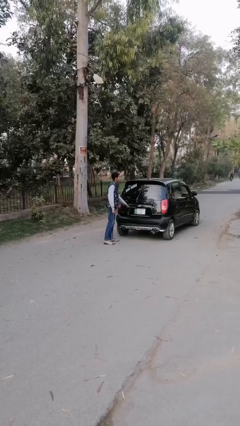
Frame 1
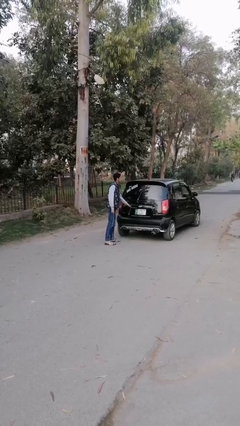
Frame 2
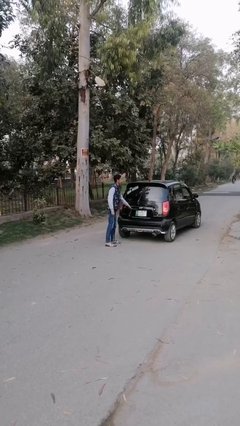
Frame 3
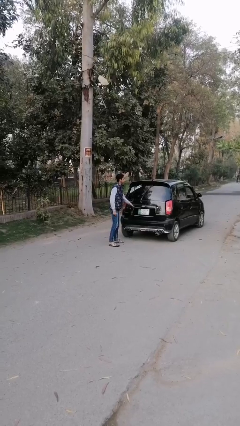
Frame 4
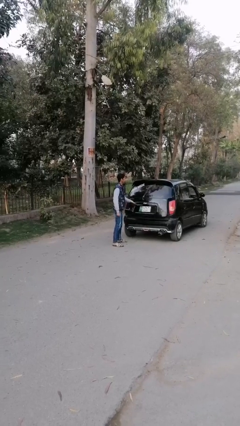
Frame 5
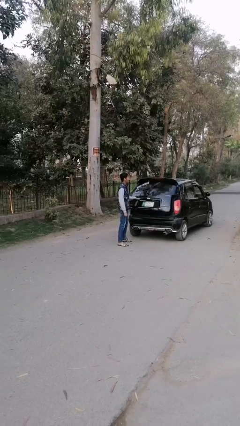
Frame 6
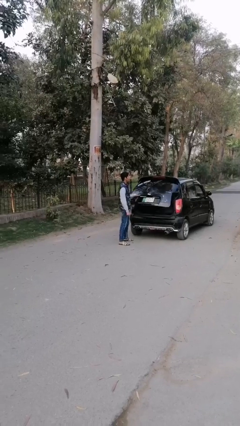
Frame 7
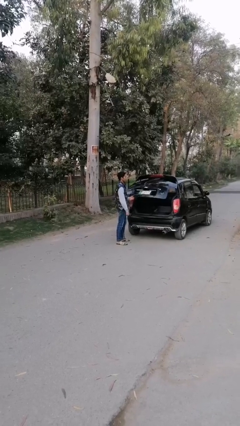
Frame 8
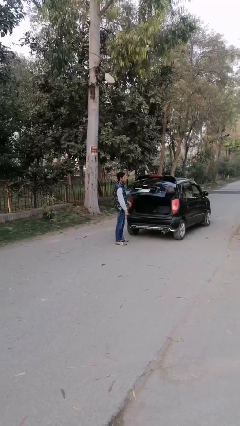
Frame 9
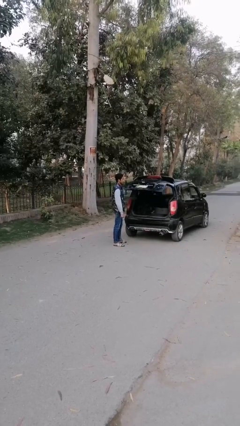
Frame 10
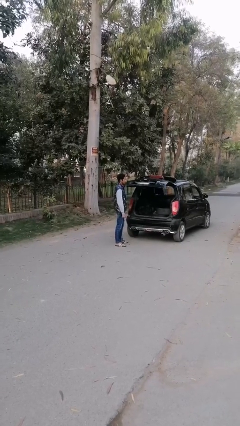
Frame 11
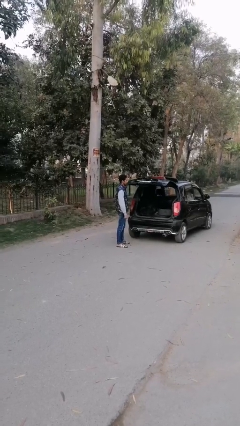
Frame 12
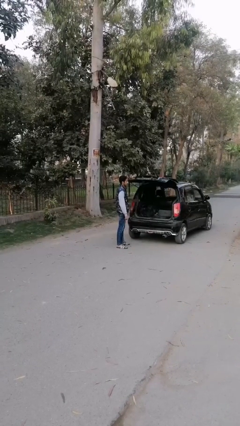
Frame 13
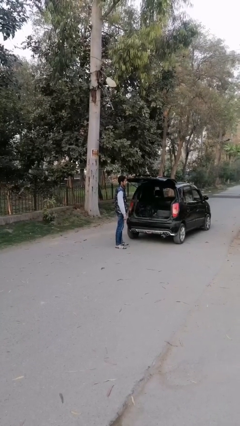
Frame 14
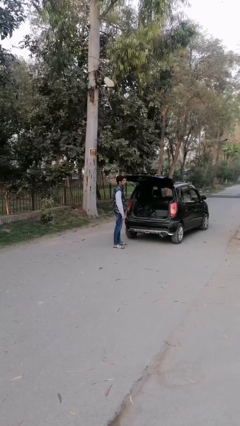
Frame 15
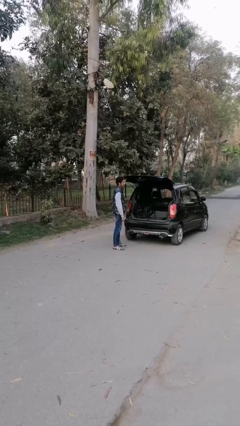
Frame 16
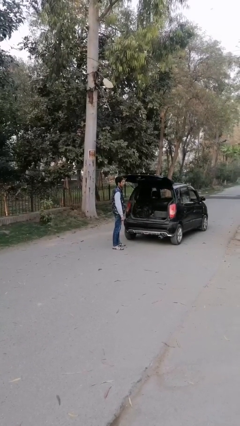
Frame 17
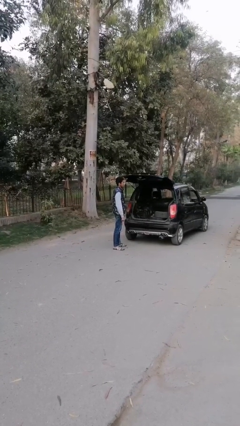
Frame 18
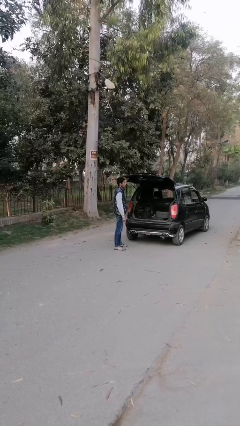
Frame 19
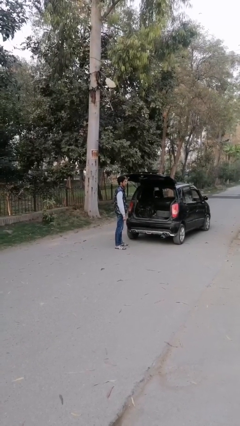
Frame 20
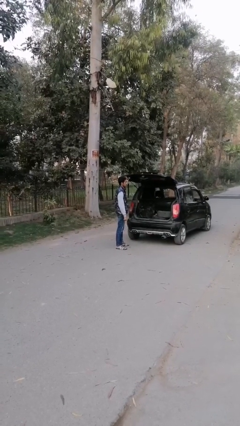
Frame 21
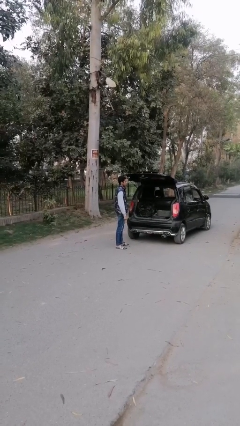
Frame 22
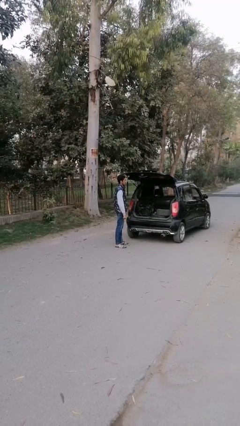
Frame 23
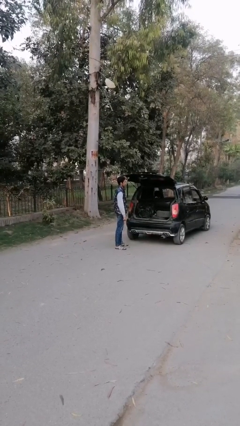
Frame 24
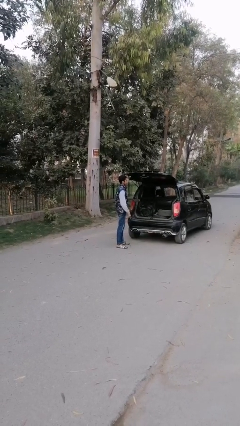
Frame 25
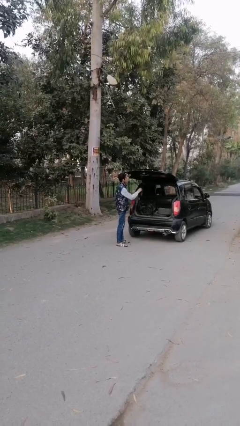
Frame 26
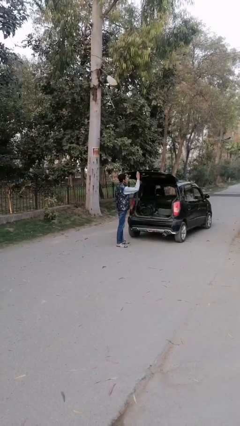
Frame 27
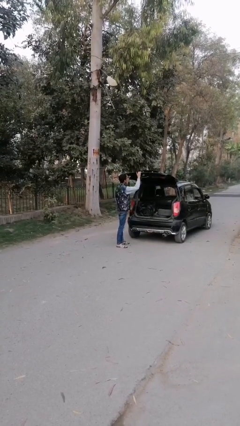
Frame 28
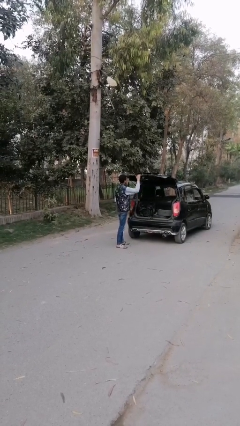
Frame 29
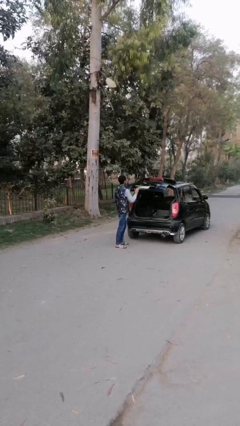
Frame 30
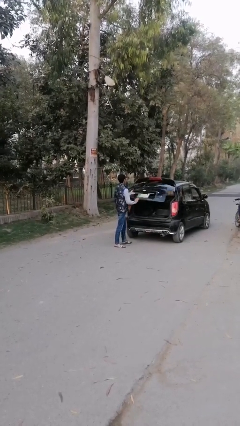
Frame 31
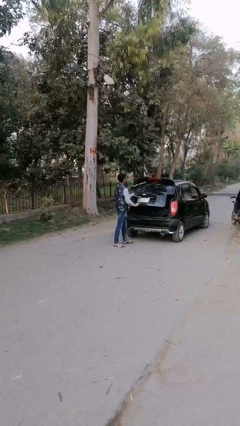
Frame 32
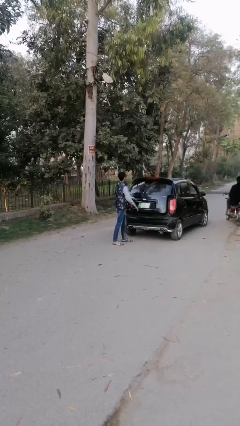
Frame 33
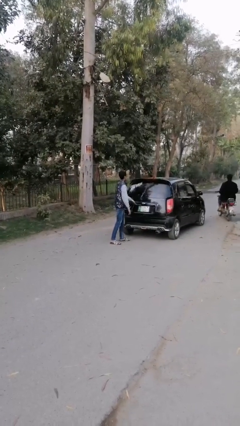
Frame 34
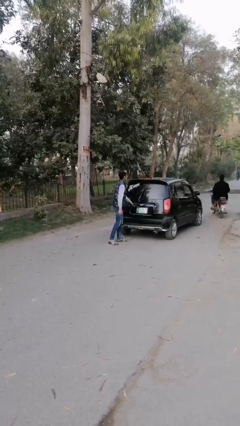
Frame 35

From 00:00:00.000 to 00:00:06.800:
person opens car trunk

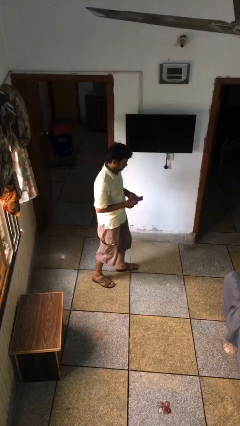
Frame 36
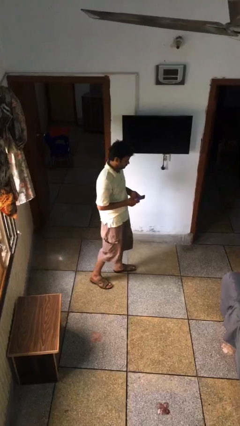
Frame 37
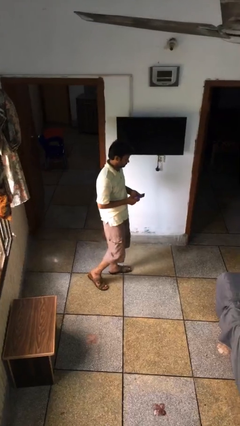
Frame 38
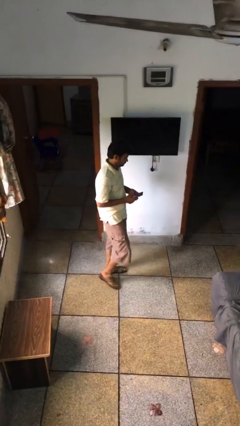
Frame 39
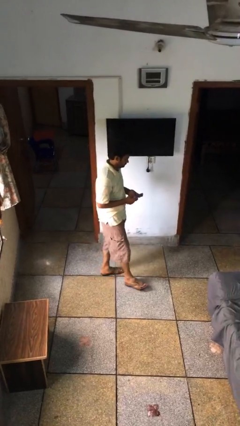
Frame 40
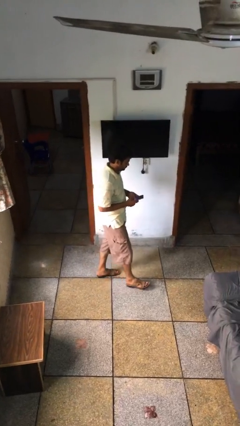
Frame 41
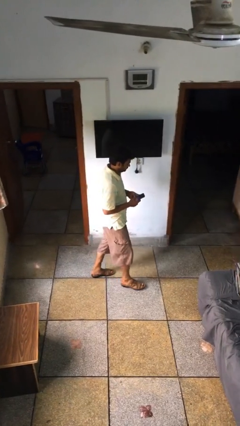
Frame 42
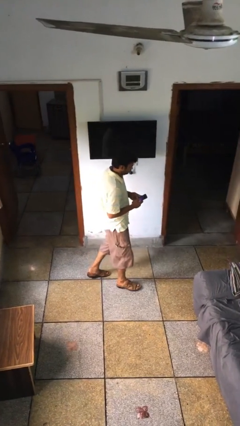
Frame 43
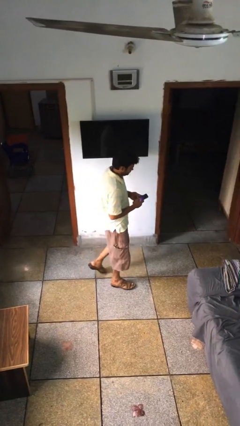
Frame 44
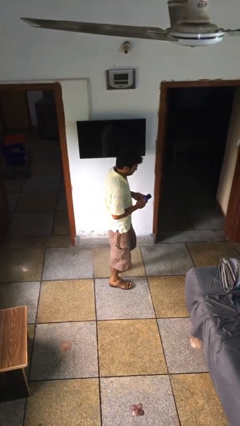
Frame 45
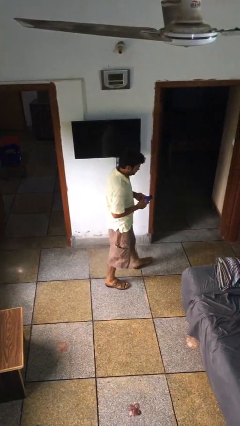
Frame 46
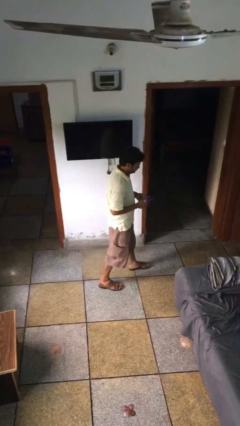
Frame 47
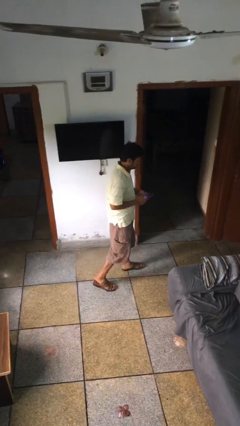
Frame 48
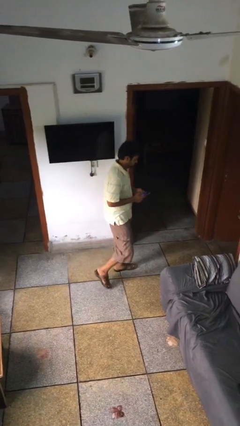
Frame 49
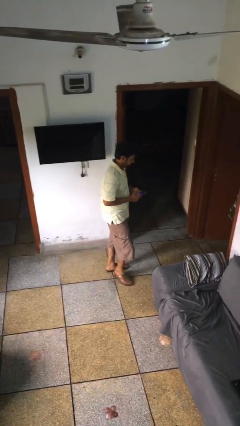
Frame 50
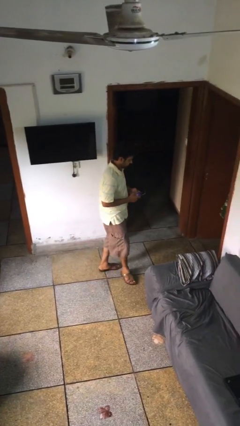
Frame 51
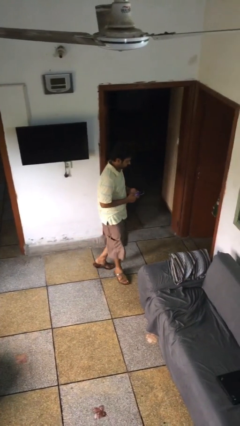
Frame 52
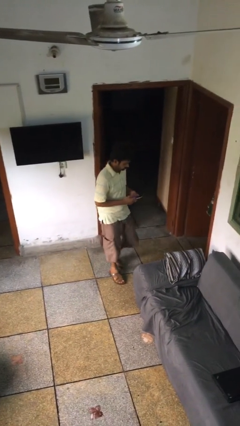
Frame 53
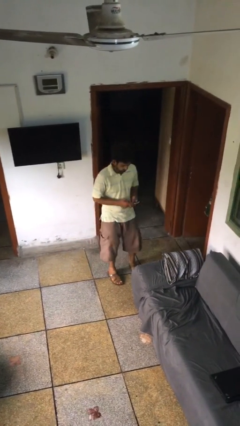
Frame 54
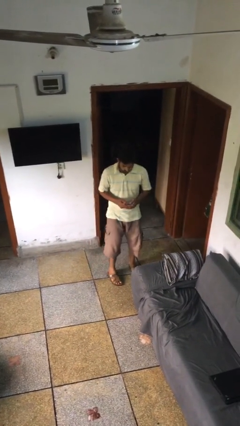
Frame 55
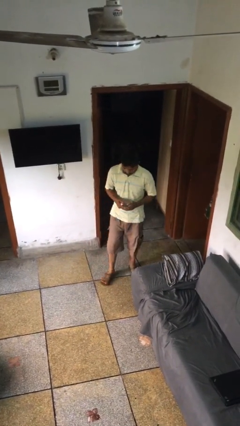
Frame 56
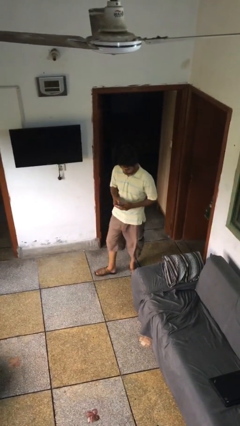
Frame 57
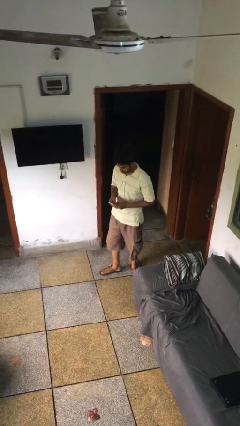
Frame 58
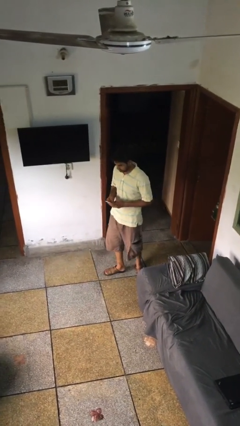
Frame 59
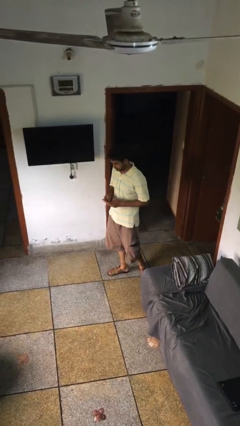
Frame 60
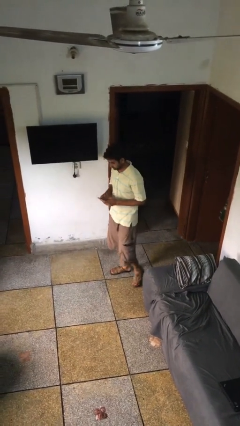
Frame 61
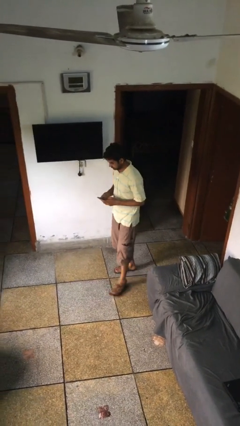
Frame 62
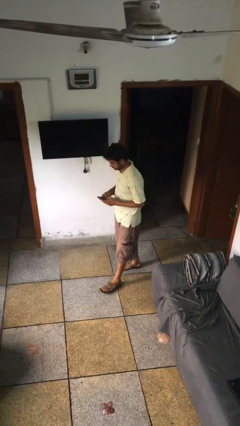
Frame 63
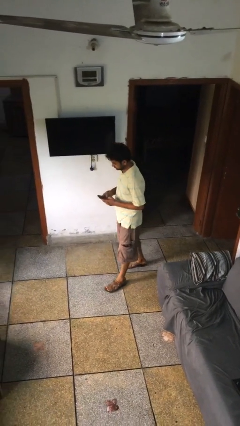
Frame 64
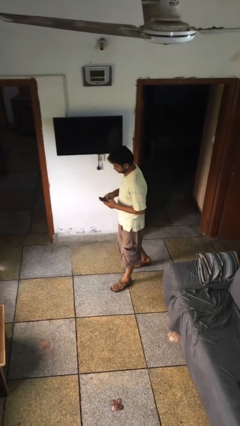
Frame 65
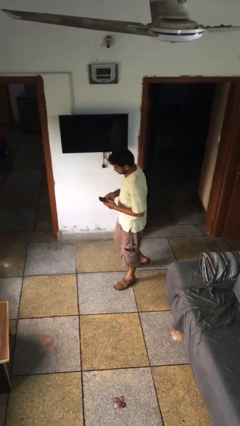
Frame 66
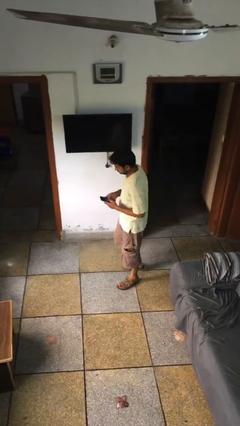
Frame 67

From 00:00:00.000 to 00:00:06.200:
person texts on phone

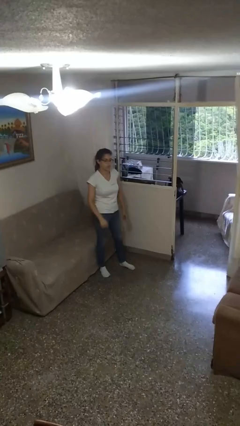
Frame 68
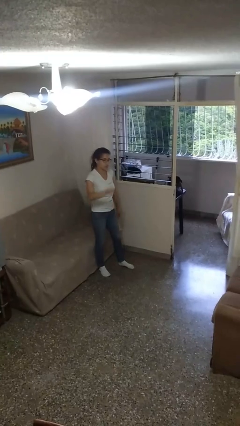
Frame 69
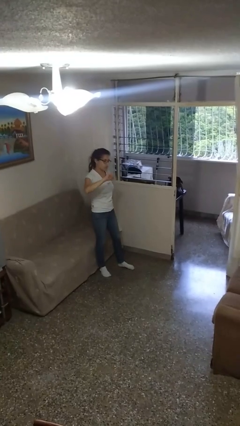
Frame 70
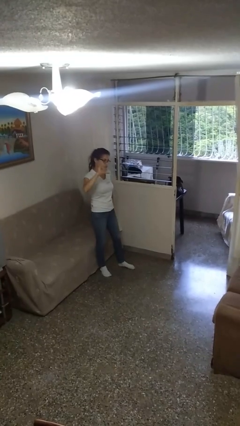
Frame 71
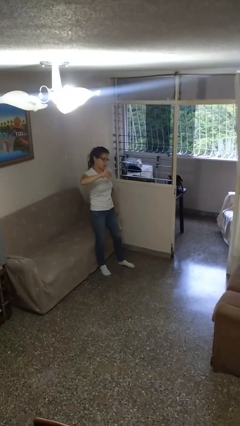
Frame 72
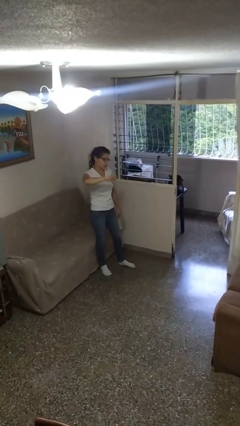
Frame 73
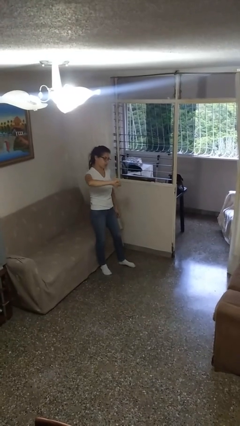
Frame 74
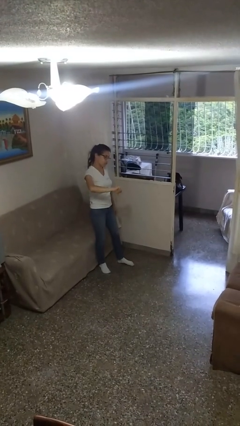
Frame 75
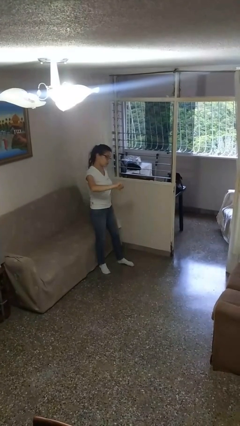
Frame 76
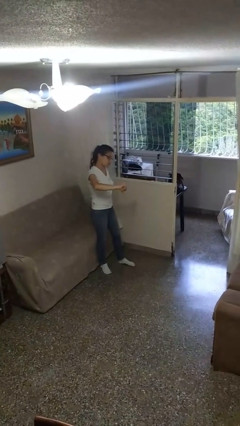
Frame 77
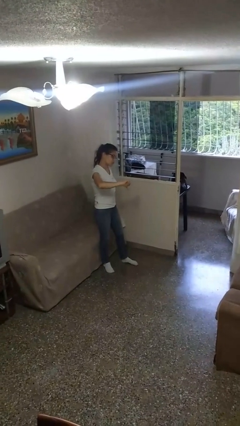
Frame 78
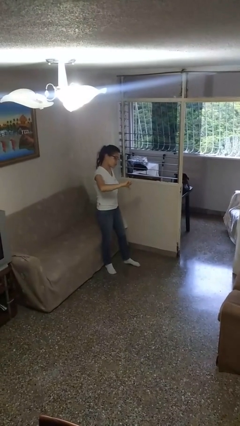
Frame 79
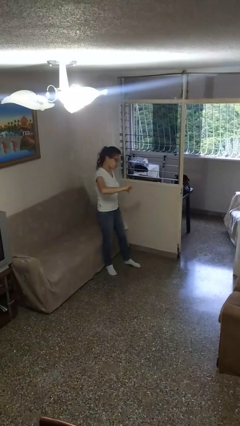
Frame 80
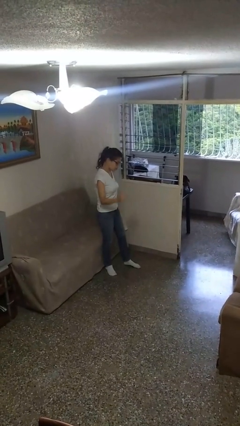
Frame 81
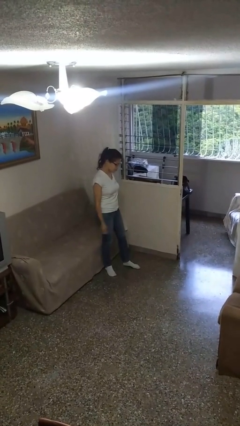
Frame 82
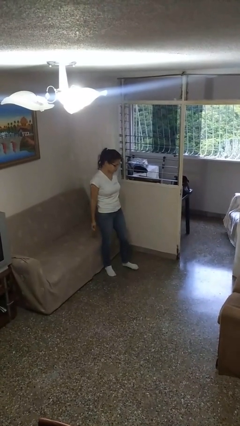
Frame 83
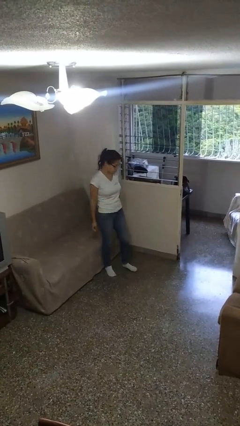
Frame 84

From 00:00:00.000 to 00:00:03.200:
person gestures thumbs down

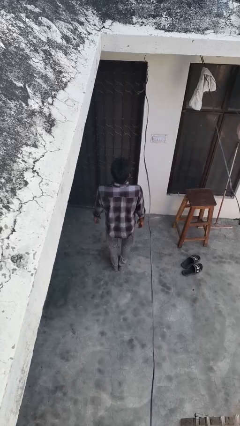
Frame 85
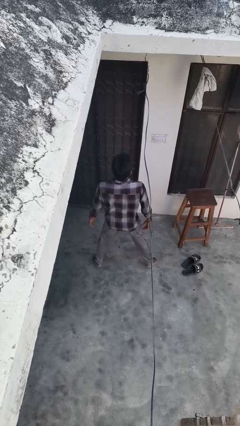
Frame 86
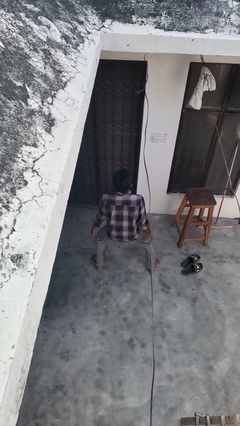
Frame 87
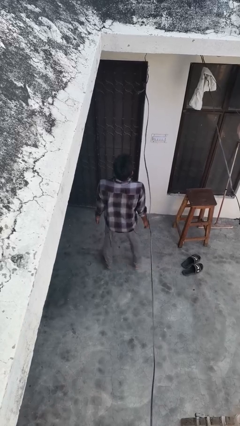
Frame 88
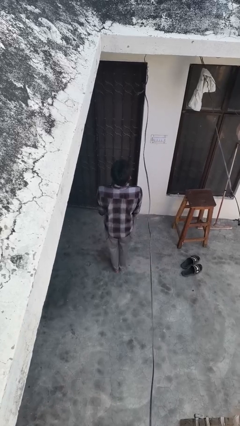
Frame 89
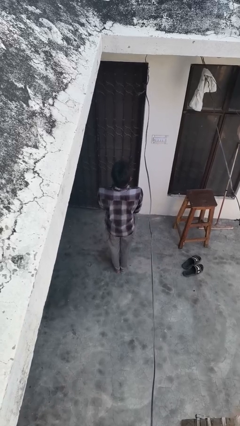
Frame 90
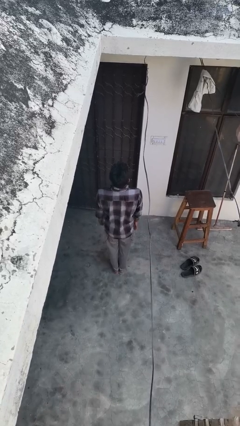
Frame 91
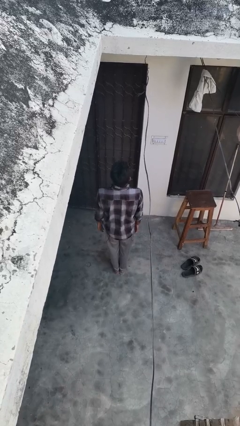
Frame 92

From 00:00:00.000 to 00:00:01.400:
person exercises with jumping jacks
